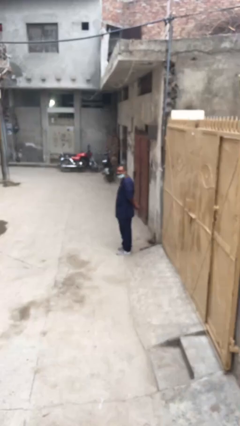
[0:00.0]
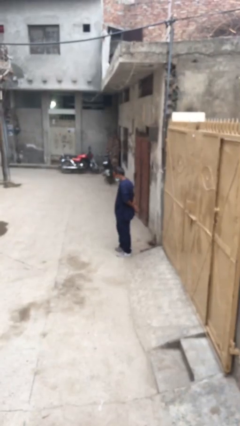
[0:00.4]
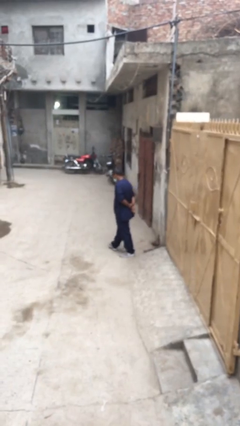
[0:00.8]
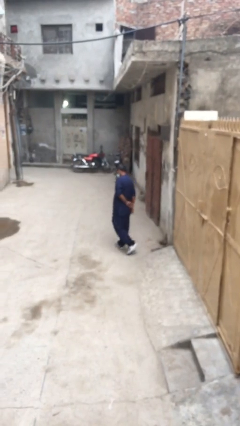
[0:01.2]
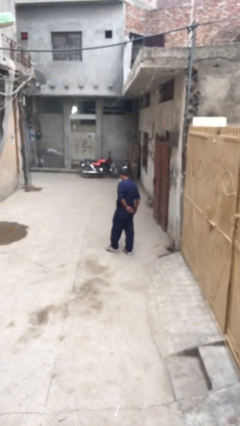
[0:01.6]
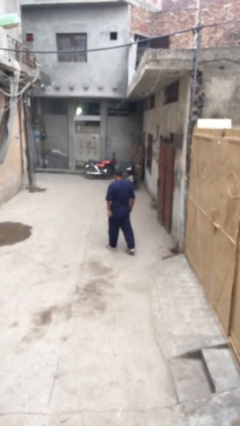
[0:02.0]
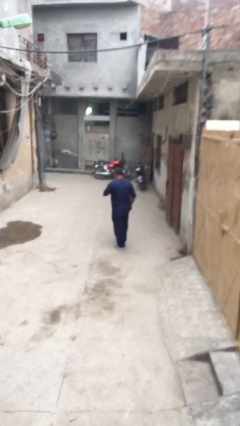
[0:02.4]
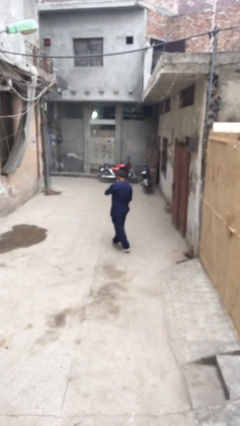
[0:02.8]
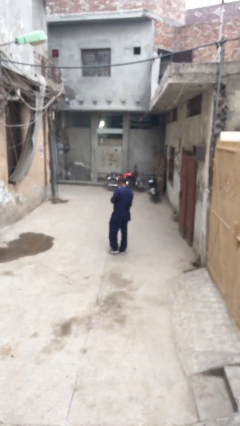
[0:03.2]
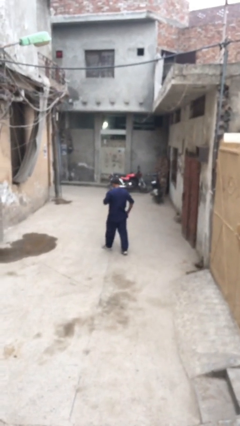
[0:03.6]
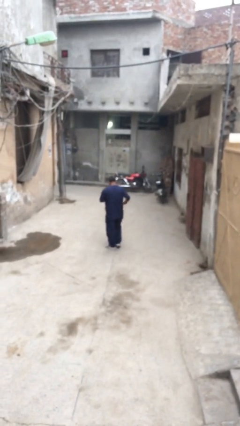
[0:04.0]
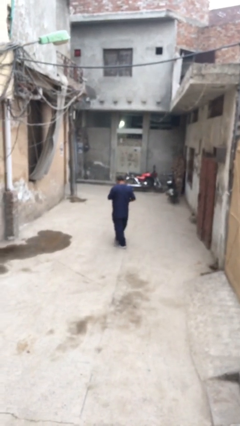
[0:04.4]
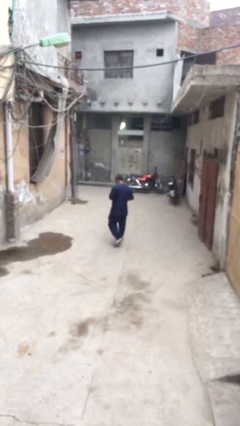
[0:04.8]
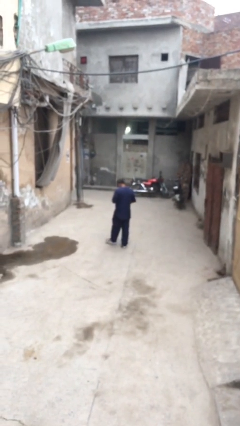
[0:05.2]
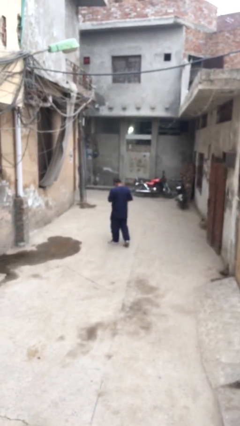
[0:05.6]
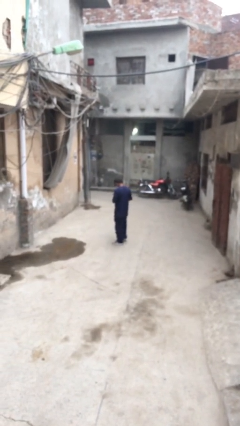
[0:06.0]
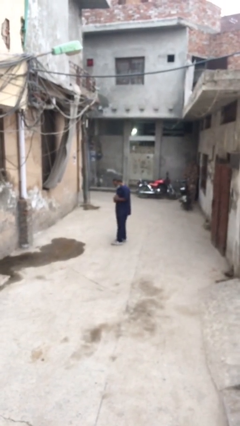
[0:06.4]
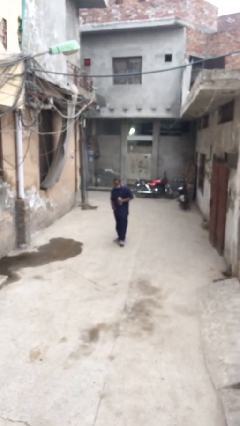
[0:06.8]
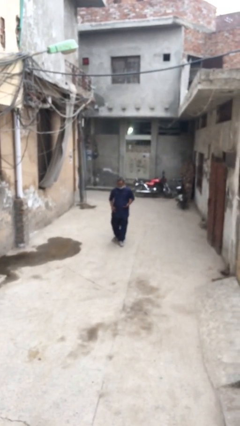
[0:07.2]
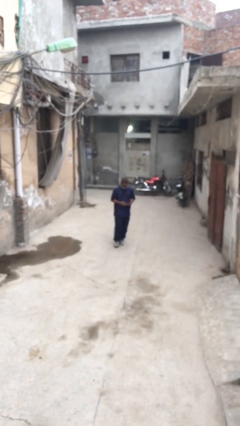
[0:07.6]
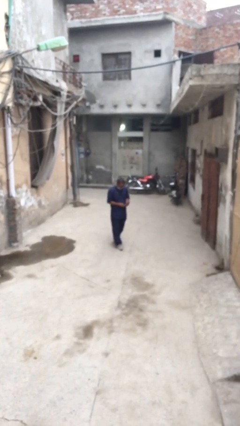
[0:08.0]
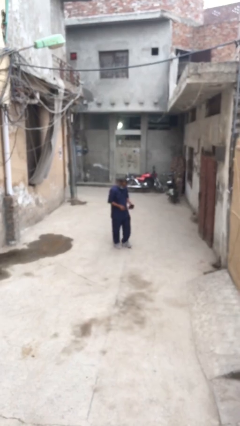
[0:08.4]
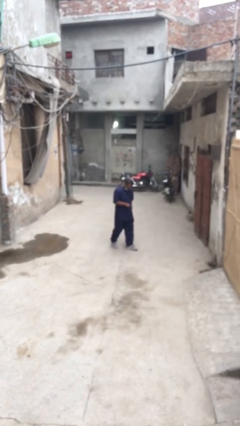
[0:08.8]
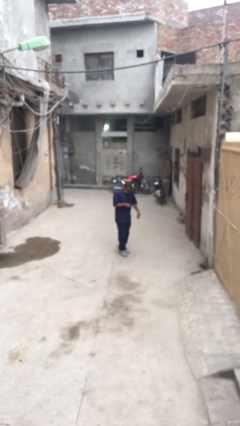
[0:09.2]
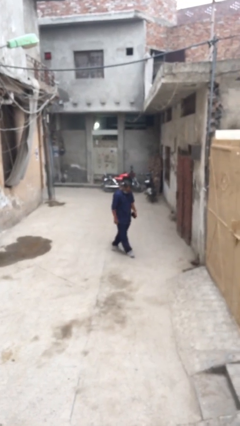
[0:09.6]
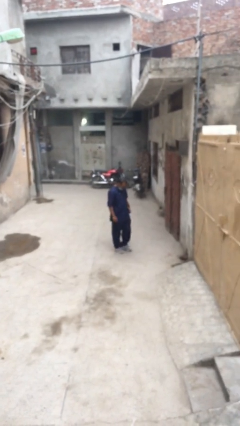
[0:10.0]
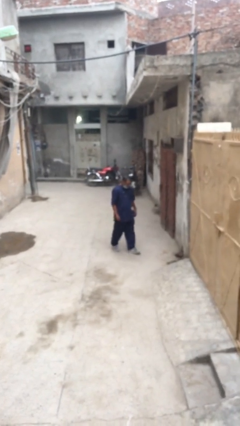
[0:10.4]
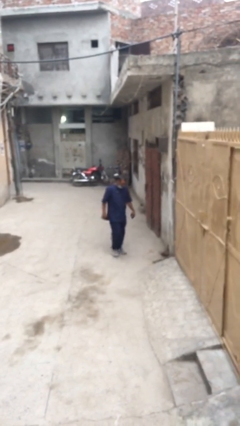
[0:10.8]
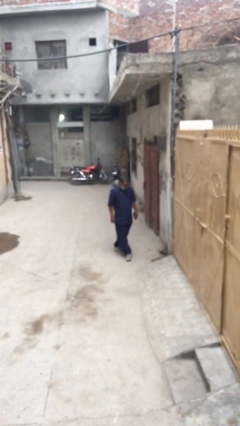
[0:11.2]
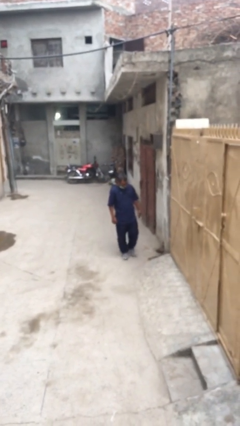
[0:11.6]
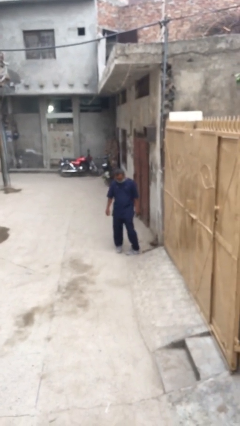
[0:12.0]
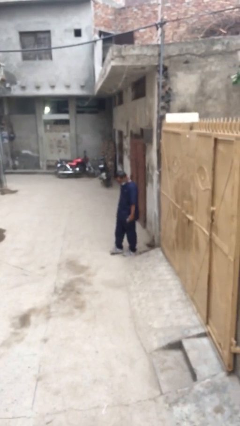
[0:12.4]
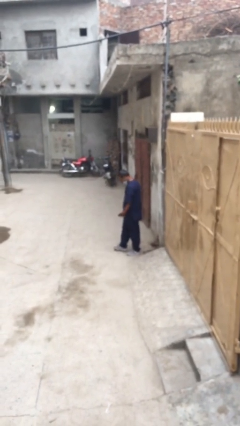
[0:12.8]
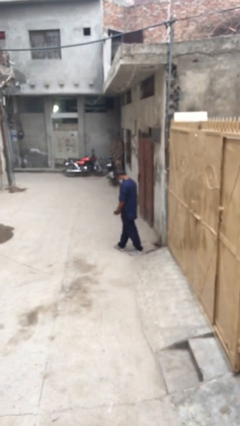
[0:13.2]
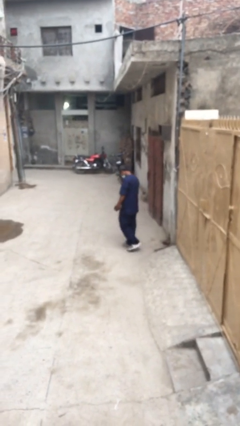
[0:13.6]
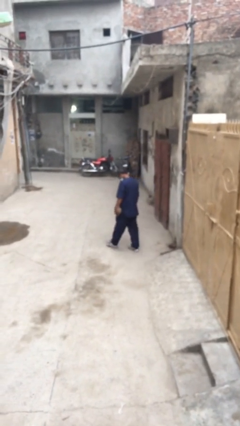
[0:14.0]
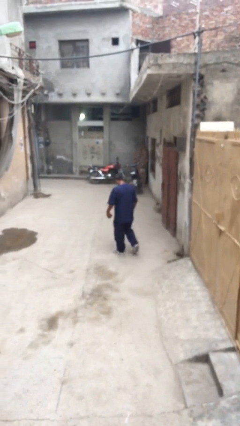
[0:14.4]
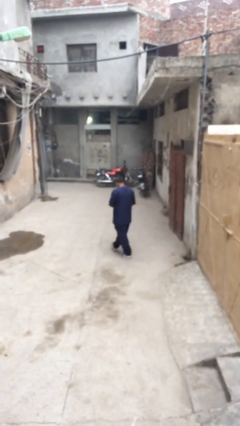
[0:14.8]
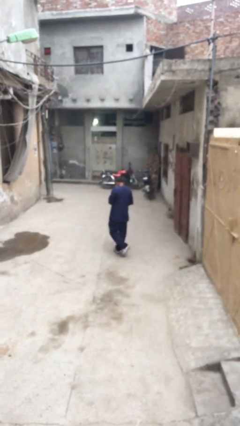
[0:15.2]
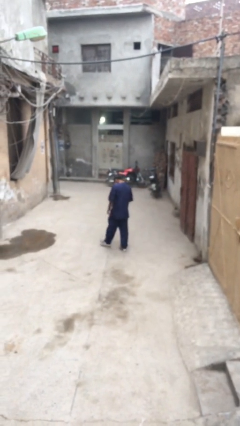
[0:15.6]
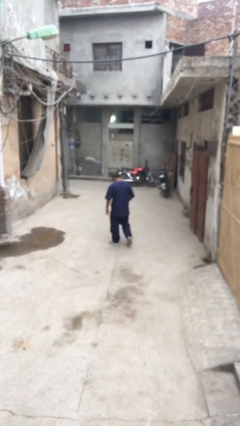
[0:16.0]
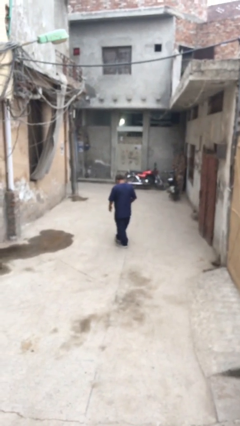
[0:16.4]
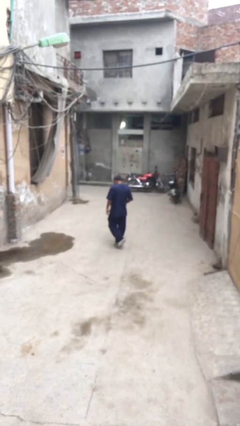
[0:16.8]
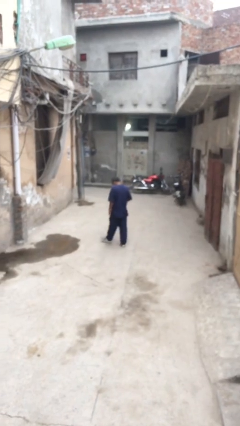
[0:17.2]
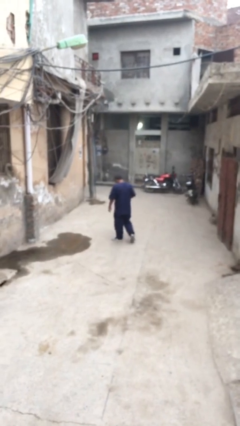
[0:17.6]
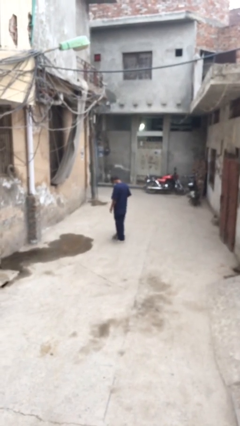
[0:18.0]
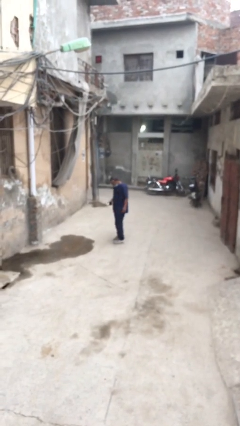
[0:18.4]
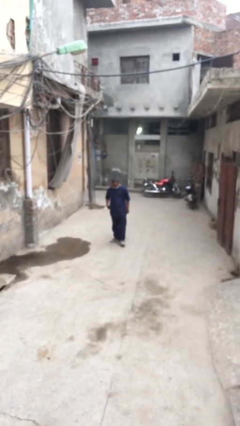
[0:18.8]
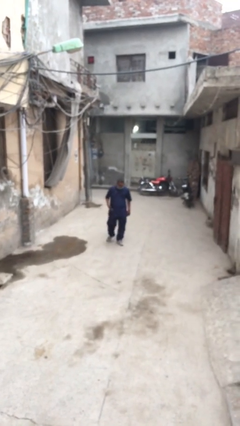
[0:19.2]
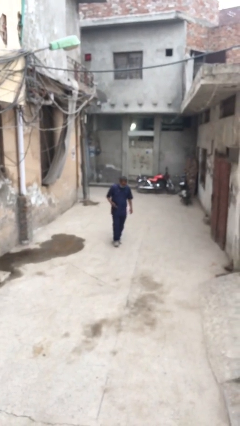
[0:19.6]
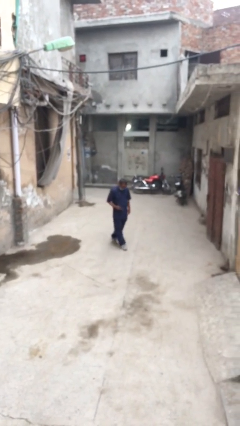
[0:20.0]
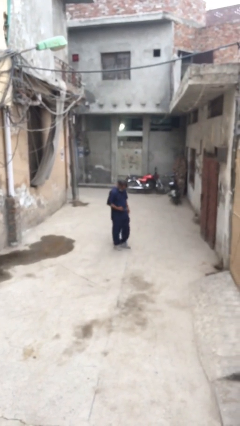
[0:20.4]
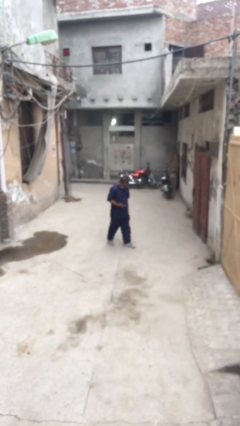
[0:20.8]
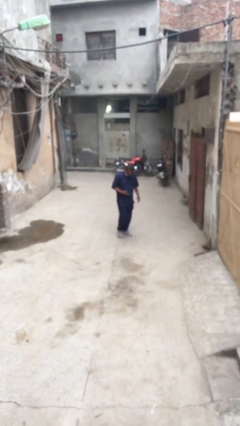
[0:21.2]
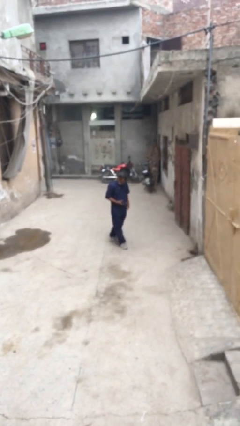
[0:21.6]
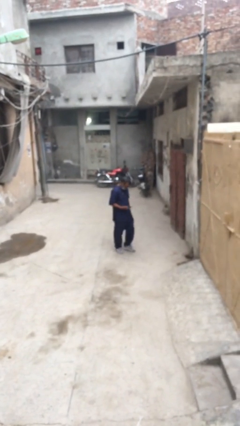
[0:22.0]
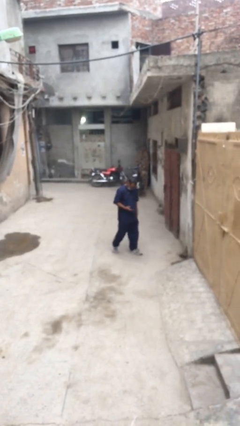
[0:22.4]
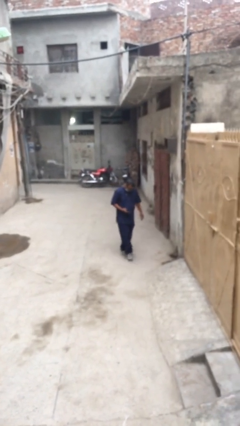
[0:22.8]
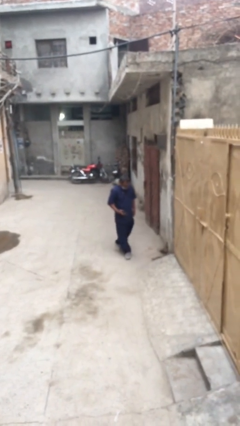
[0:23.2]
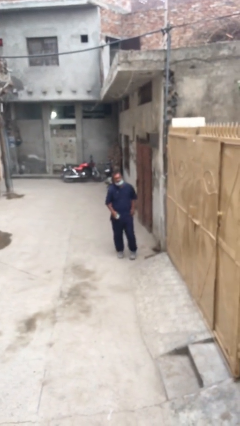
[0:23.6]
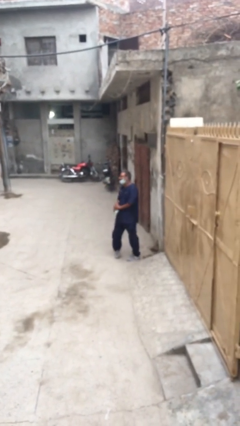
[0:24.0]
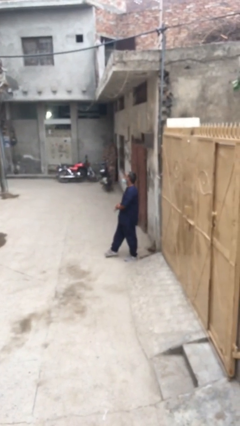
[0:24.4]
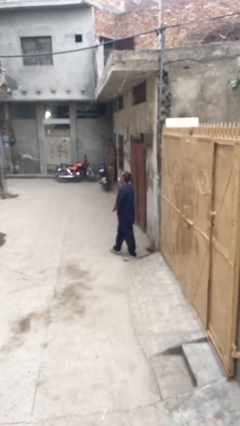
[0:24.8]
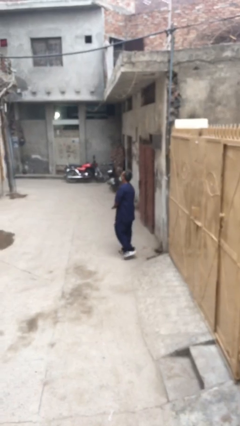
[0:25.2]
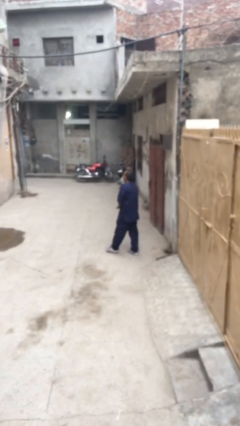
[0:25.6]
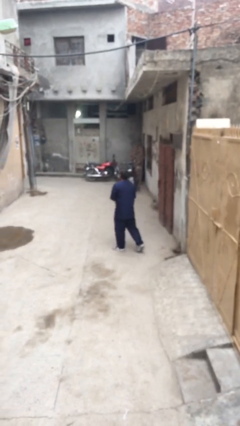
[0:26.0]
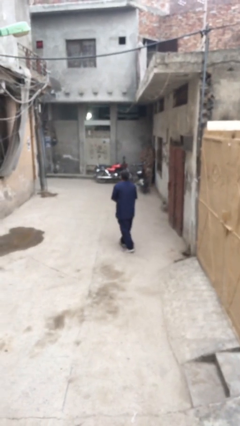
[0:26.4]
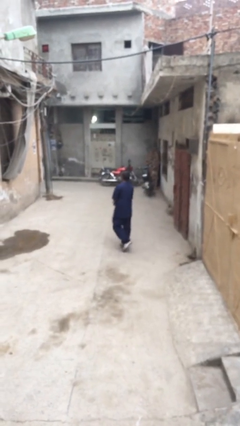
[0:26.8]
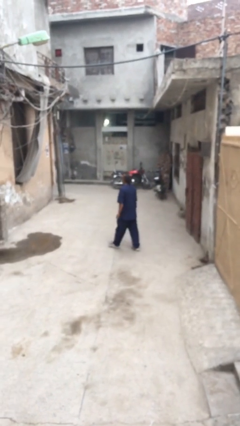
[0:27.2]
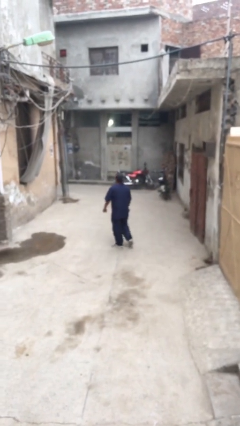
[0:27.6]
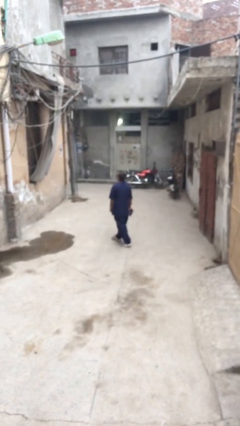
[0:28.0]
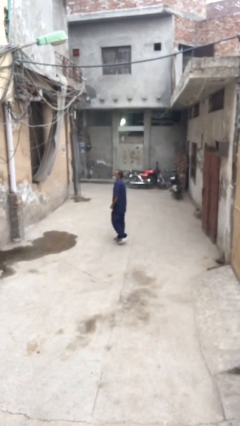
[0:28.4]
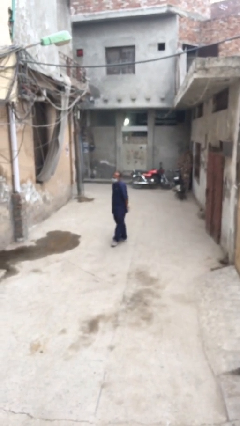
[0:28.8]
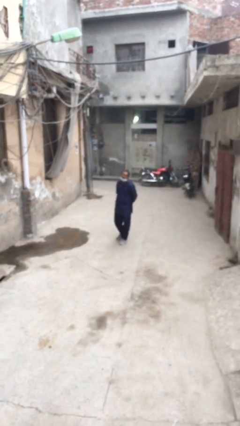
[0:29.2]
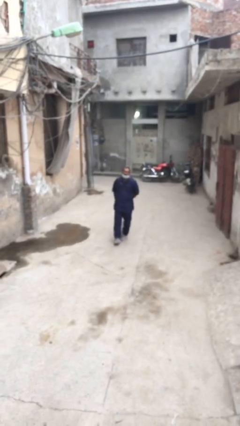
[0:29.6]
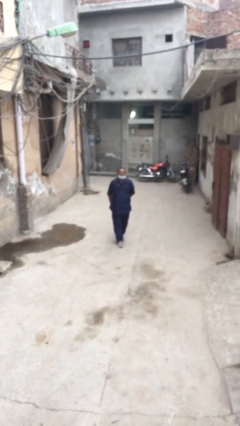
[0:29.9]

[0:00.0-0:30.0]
person walks

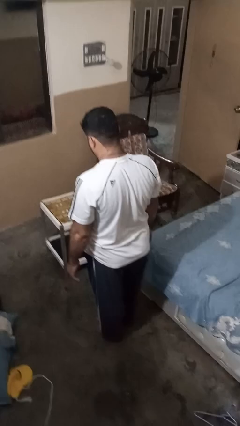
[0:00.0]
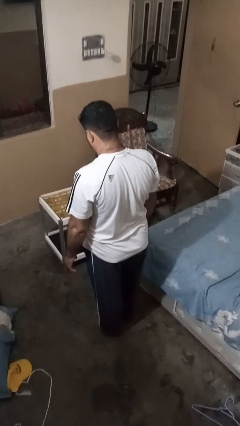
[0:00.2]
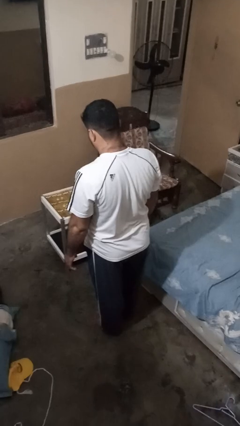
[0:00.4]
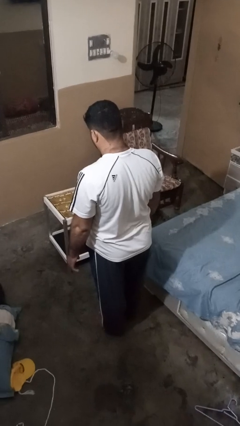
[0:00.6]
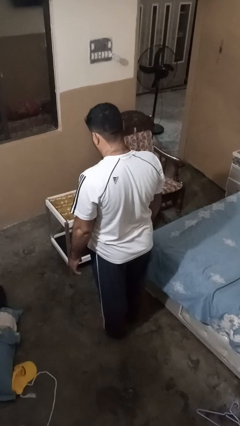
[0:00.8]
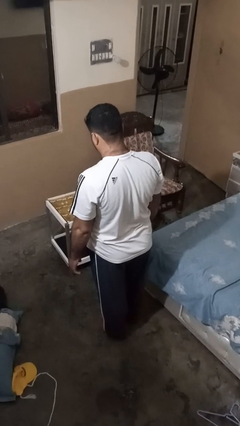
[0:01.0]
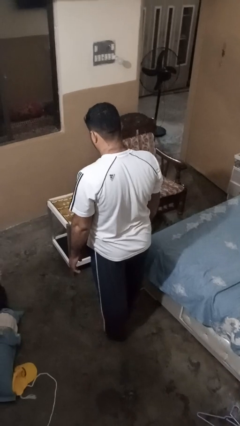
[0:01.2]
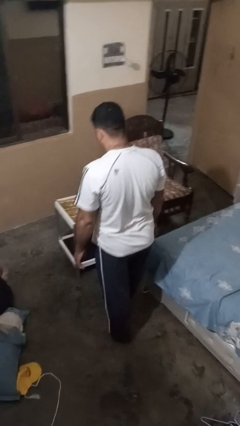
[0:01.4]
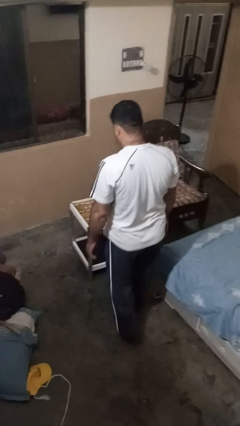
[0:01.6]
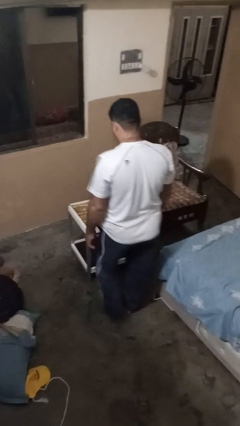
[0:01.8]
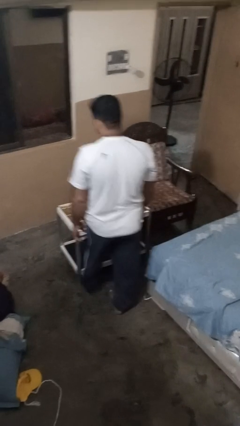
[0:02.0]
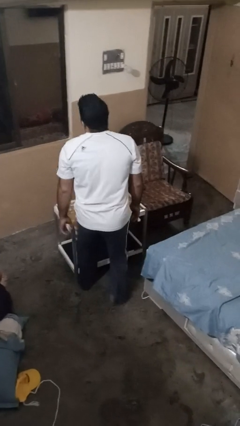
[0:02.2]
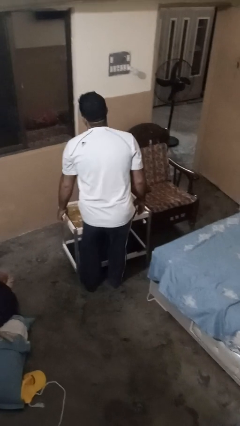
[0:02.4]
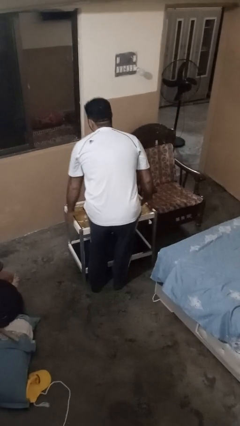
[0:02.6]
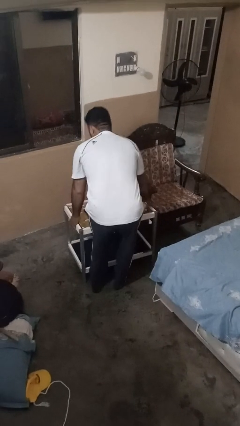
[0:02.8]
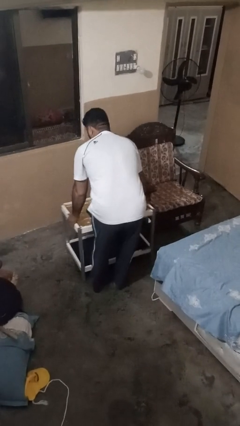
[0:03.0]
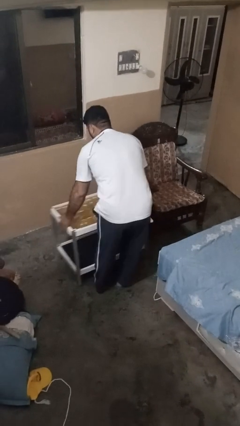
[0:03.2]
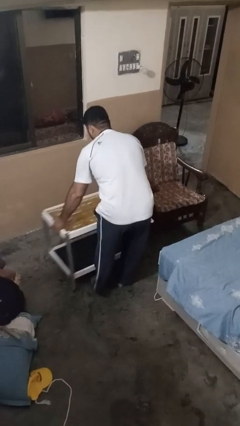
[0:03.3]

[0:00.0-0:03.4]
person bumps into table
